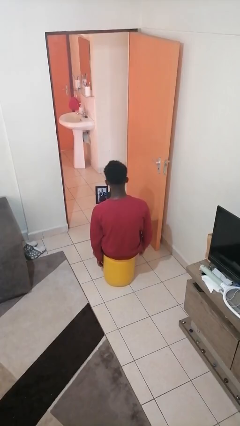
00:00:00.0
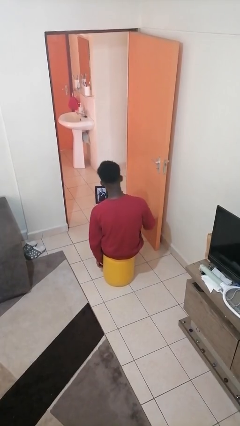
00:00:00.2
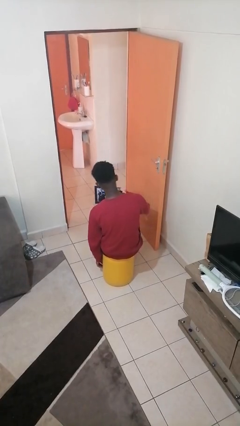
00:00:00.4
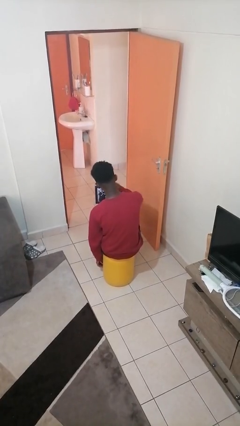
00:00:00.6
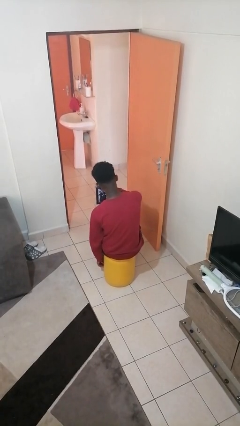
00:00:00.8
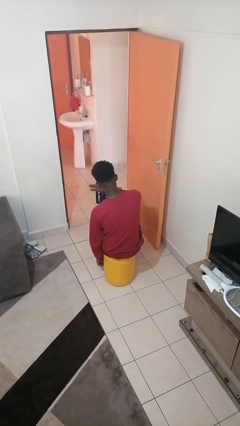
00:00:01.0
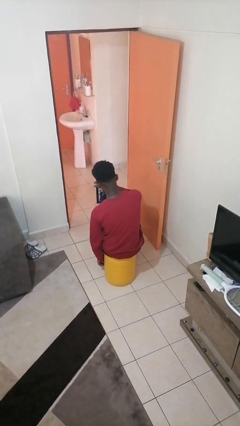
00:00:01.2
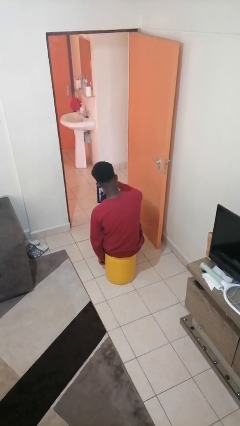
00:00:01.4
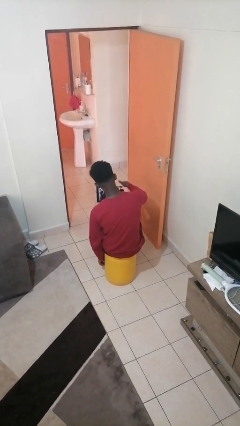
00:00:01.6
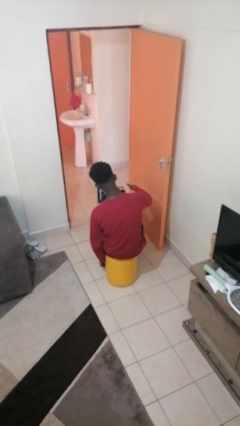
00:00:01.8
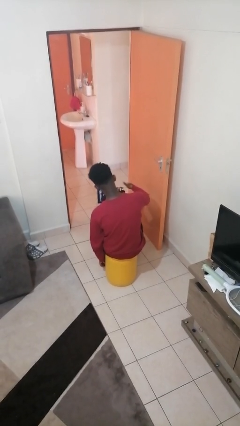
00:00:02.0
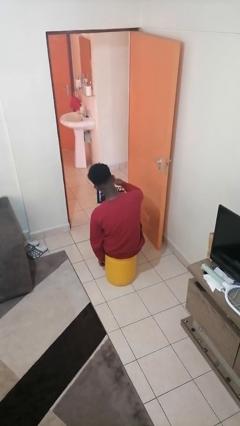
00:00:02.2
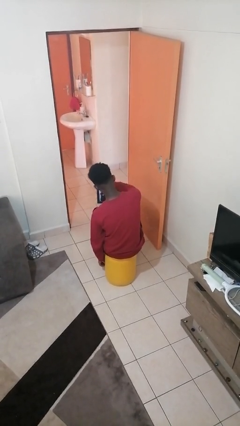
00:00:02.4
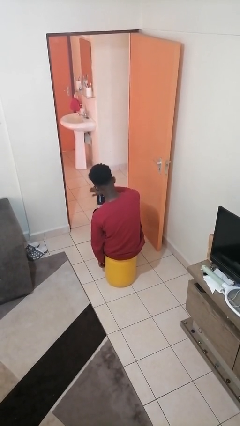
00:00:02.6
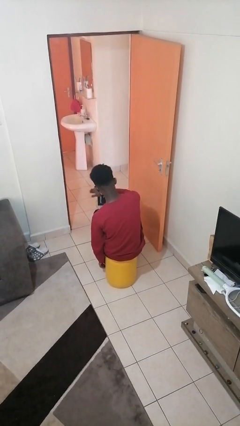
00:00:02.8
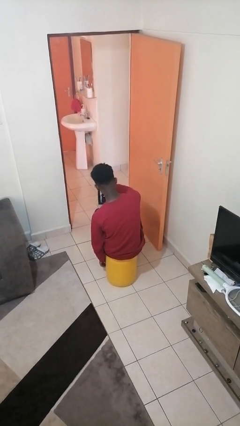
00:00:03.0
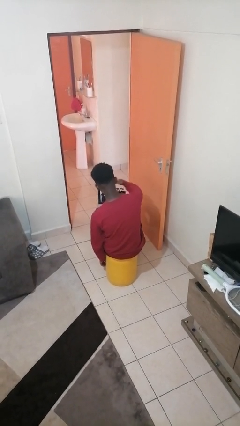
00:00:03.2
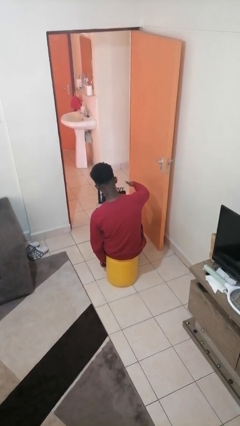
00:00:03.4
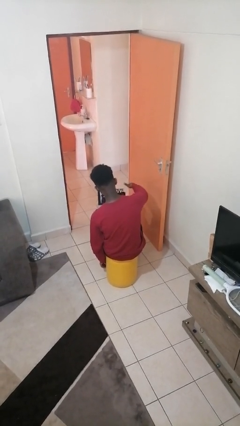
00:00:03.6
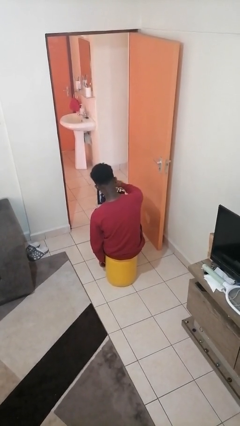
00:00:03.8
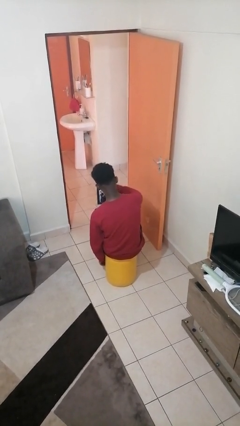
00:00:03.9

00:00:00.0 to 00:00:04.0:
person waves hand over object

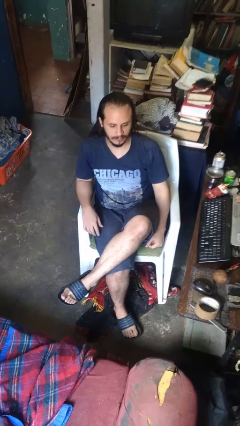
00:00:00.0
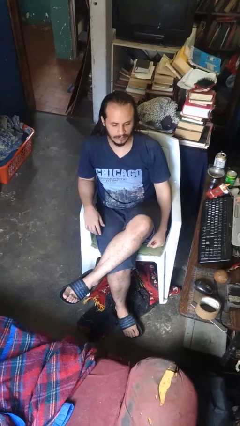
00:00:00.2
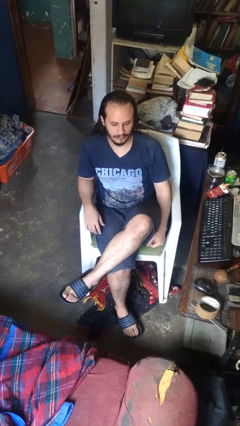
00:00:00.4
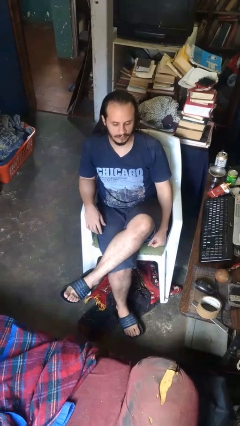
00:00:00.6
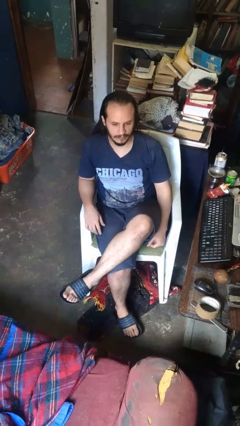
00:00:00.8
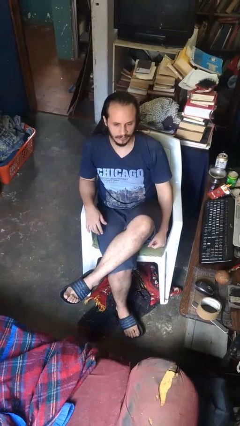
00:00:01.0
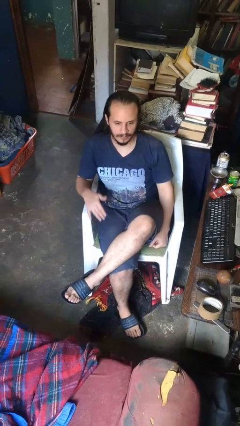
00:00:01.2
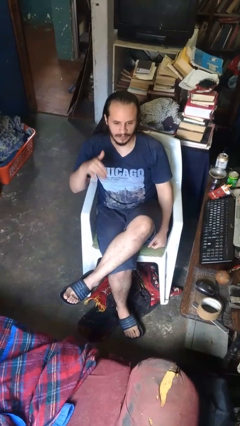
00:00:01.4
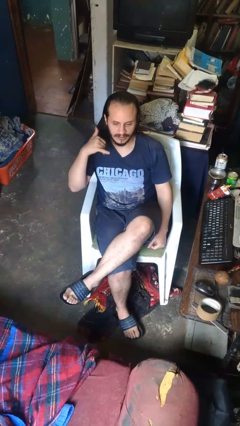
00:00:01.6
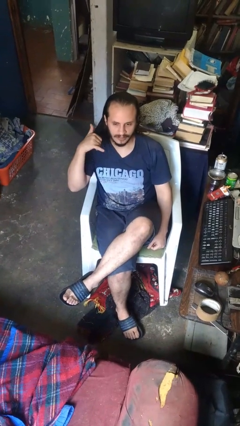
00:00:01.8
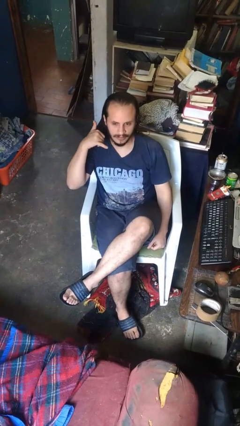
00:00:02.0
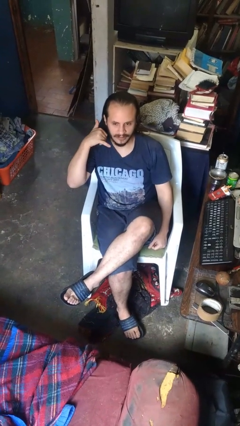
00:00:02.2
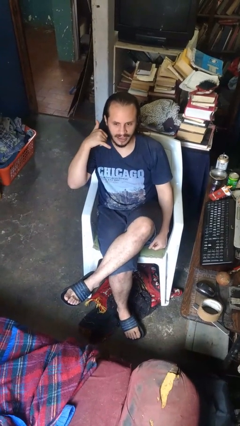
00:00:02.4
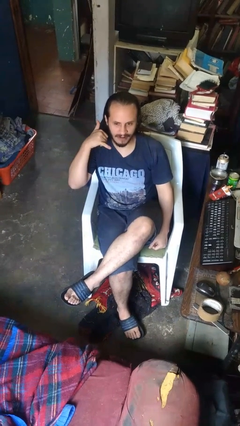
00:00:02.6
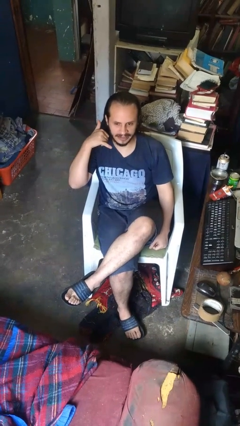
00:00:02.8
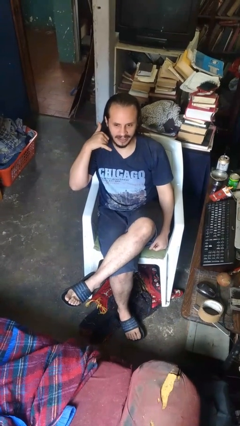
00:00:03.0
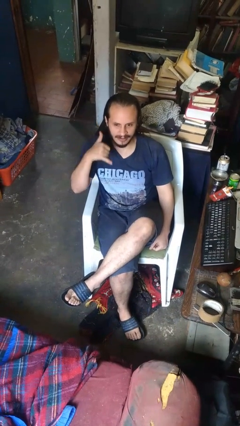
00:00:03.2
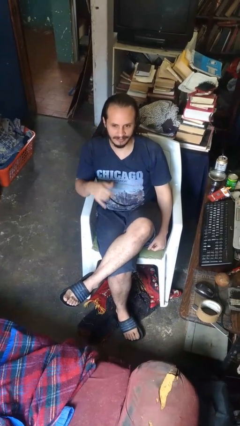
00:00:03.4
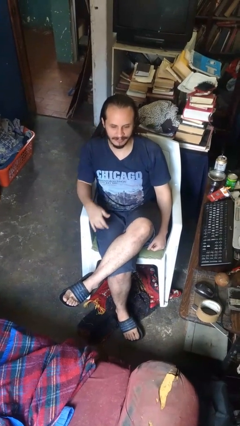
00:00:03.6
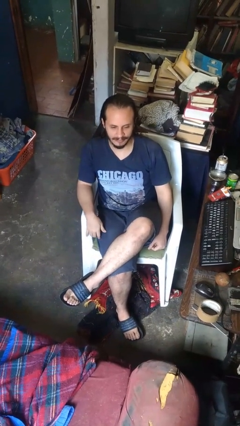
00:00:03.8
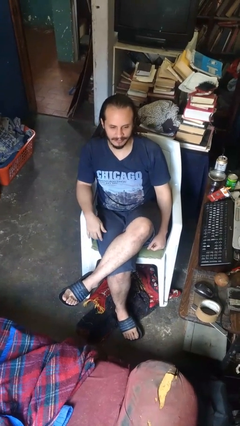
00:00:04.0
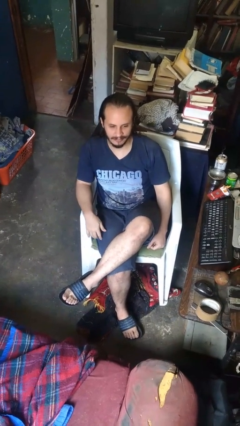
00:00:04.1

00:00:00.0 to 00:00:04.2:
person gestures call me

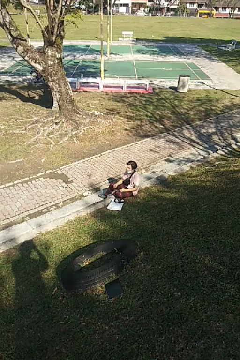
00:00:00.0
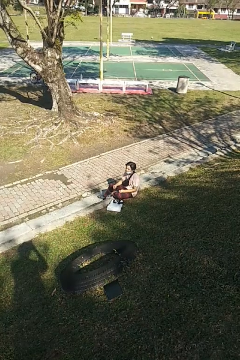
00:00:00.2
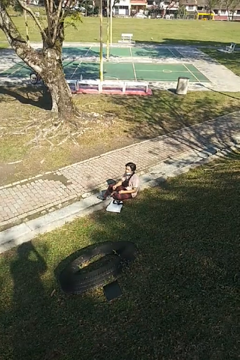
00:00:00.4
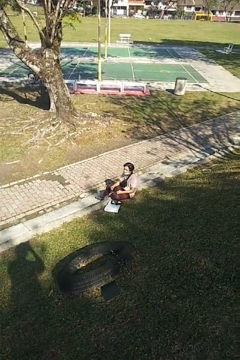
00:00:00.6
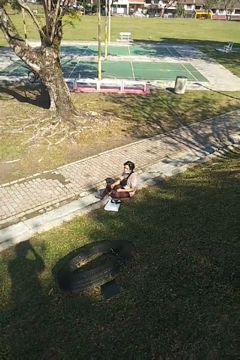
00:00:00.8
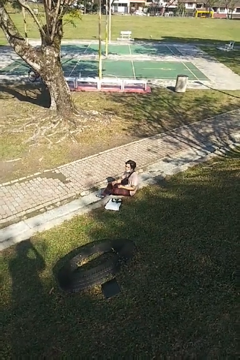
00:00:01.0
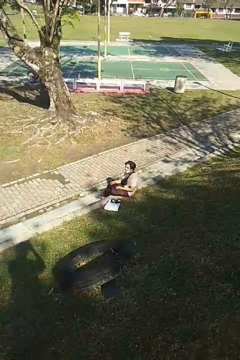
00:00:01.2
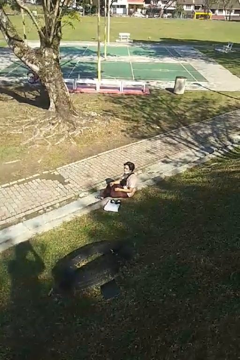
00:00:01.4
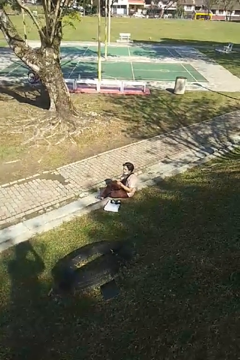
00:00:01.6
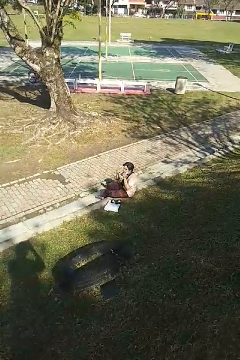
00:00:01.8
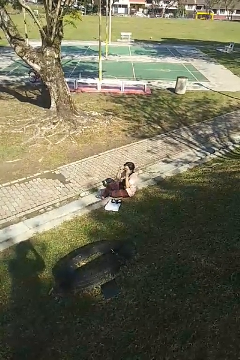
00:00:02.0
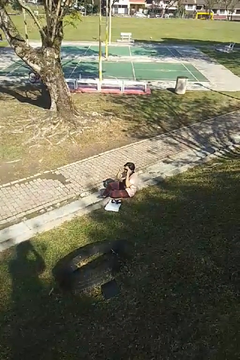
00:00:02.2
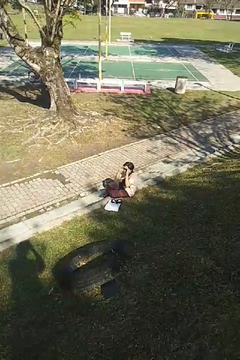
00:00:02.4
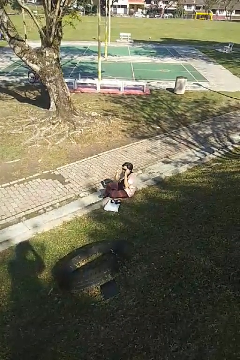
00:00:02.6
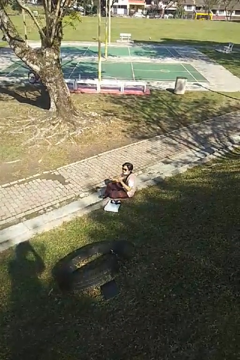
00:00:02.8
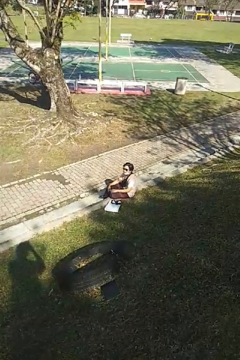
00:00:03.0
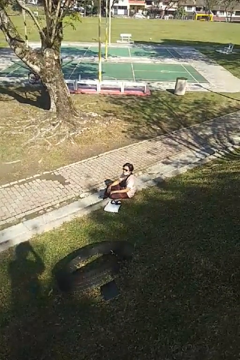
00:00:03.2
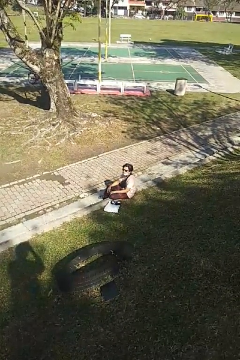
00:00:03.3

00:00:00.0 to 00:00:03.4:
person puts on sunglasses

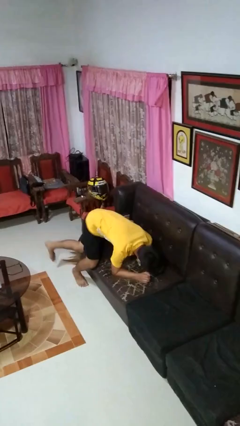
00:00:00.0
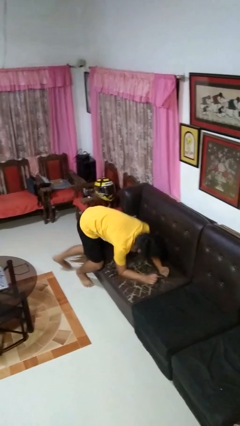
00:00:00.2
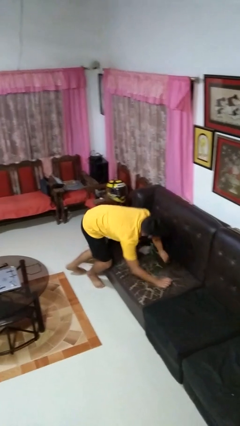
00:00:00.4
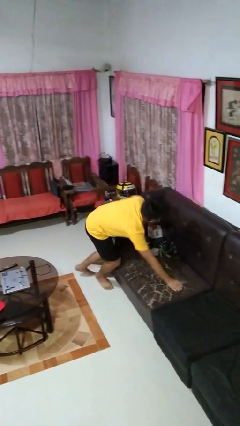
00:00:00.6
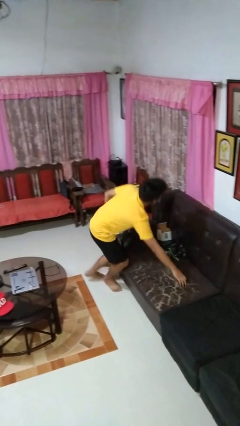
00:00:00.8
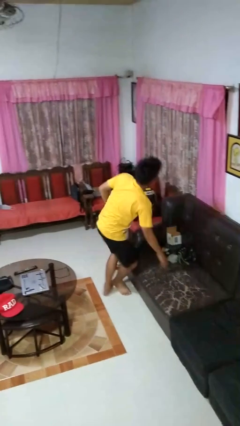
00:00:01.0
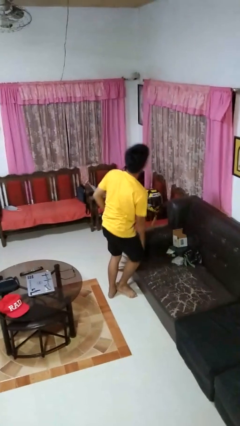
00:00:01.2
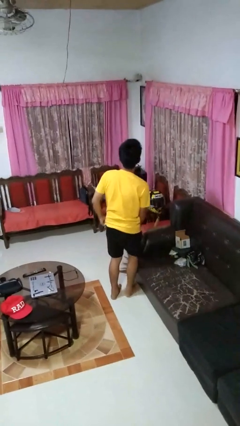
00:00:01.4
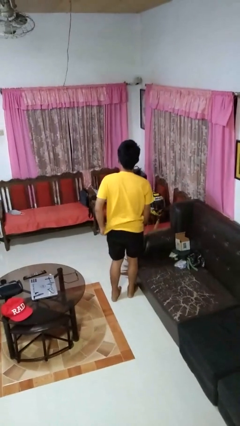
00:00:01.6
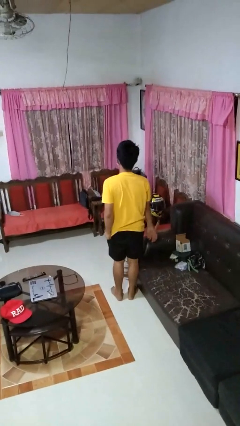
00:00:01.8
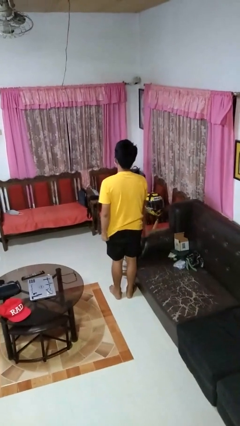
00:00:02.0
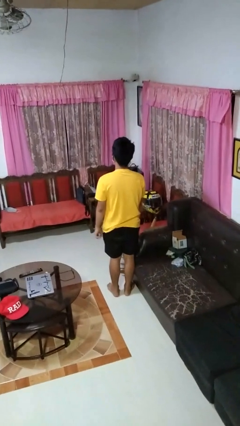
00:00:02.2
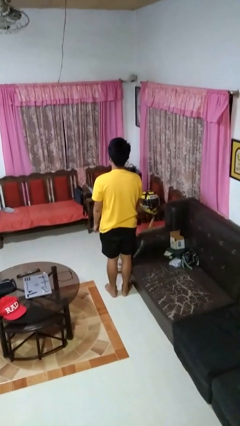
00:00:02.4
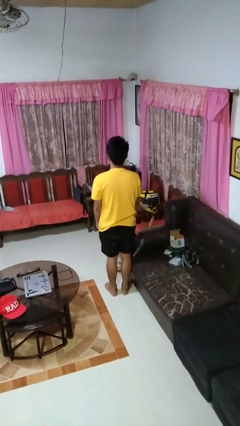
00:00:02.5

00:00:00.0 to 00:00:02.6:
person stands up

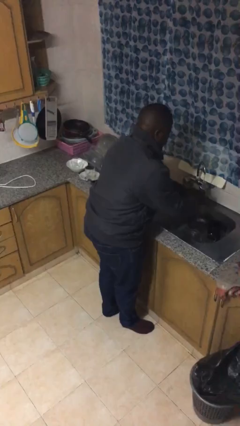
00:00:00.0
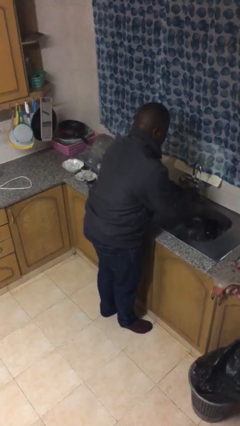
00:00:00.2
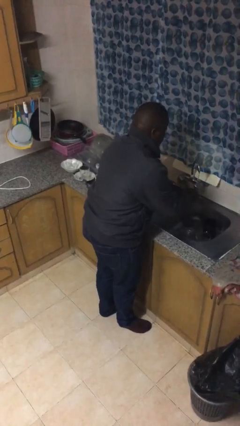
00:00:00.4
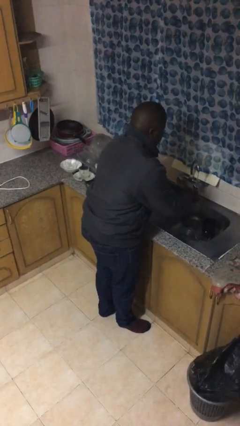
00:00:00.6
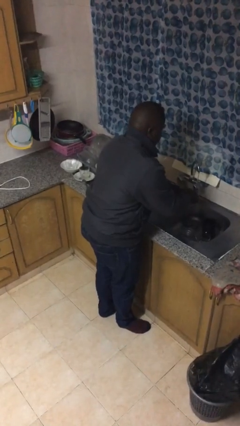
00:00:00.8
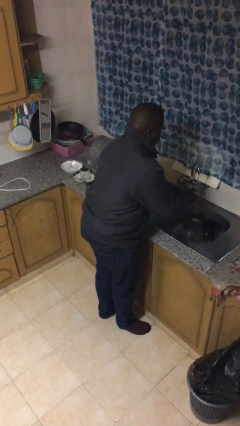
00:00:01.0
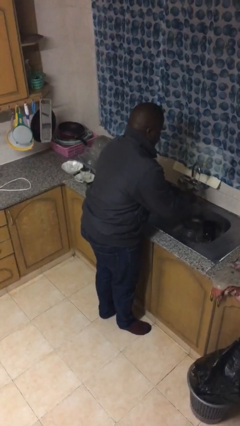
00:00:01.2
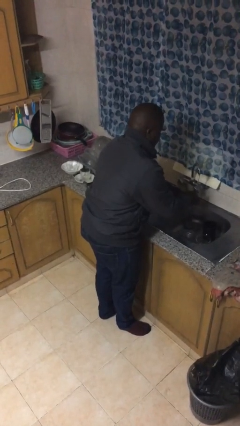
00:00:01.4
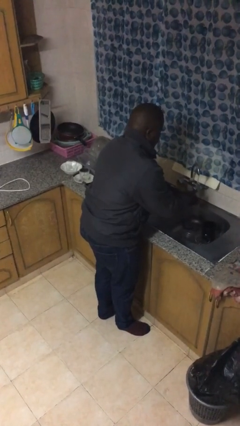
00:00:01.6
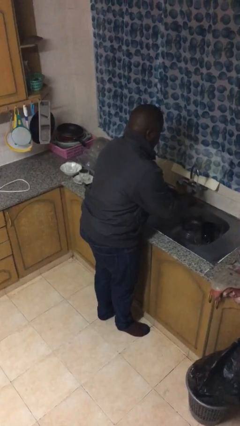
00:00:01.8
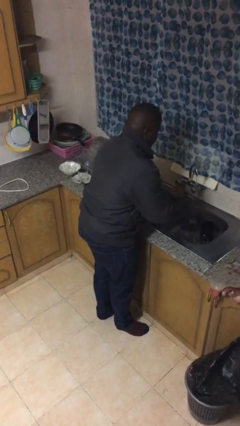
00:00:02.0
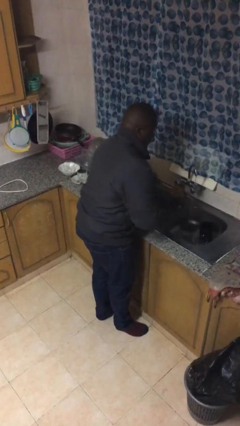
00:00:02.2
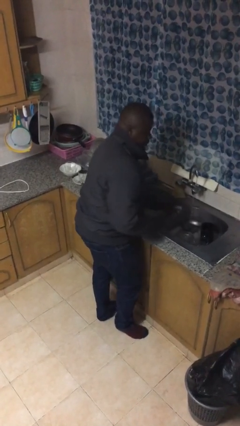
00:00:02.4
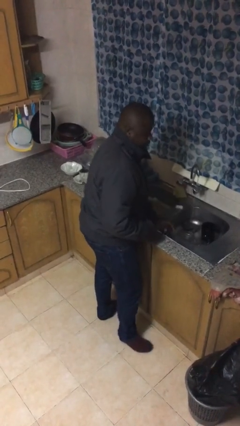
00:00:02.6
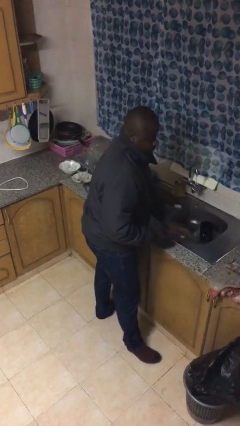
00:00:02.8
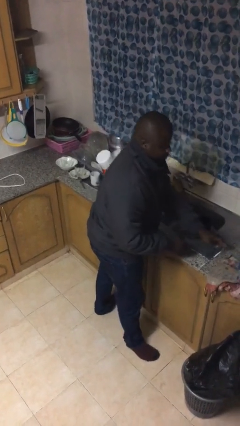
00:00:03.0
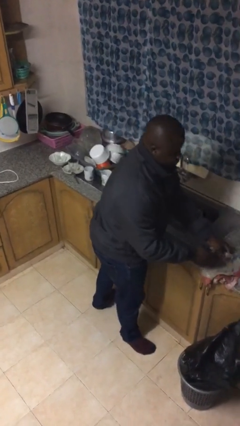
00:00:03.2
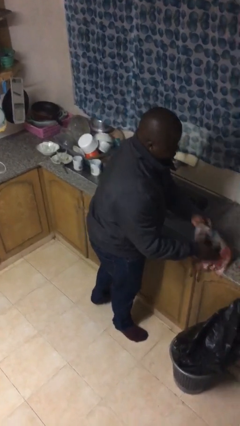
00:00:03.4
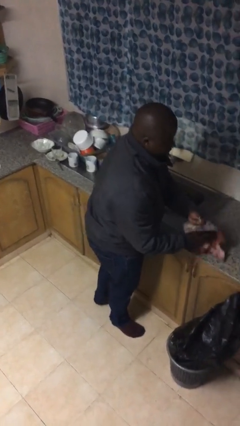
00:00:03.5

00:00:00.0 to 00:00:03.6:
person washes hands
